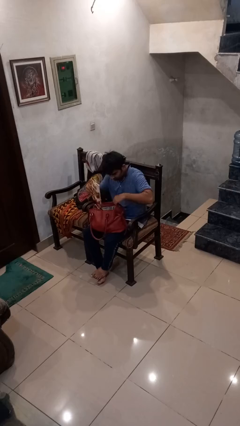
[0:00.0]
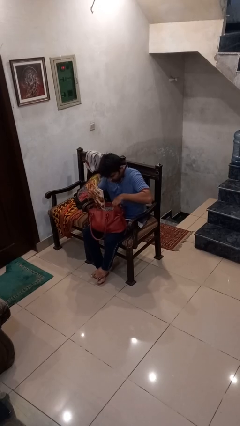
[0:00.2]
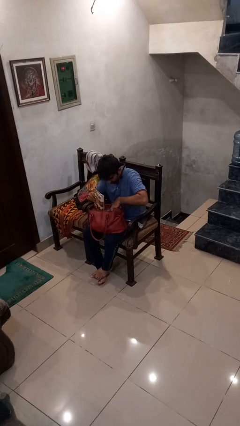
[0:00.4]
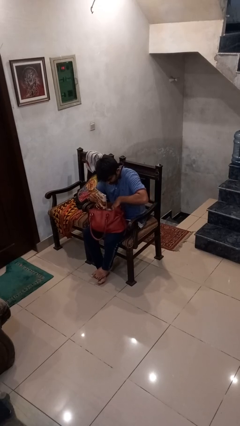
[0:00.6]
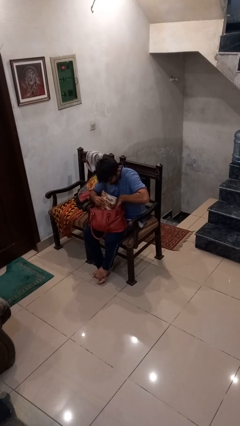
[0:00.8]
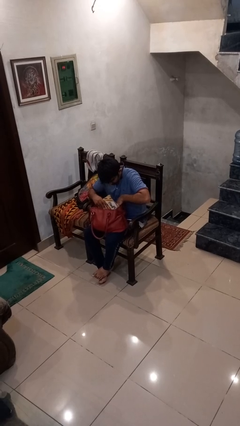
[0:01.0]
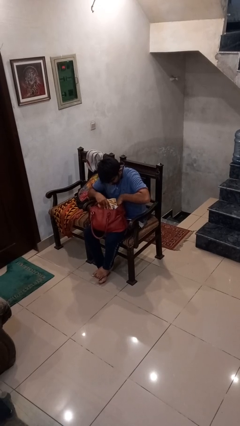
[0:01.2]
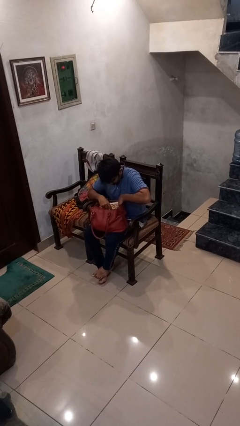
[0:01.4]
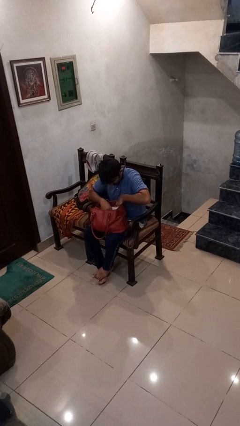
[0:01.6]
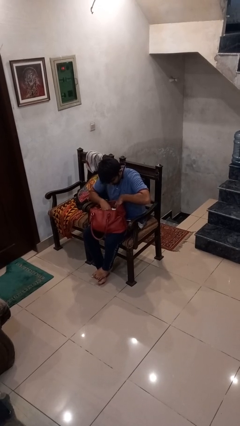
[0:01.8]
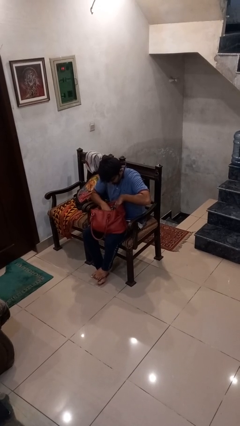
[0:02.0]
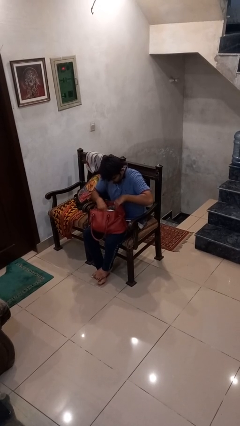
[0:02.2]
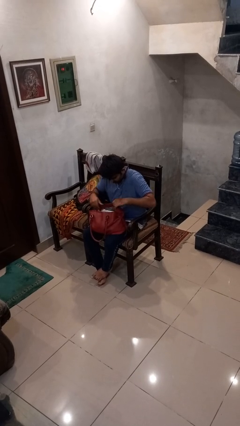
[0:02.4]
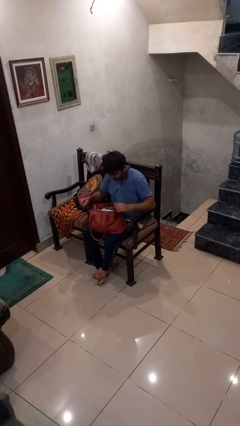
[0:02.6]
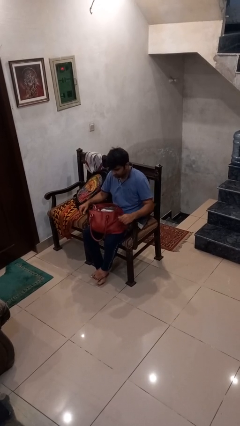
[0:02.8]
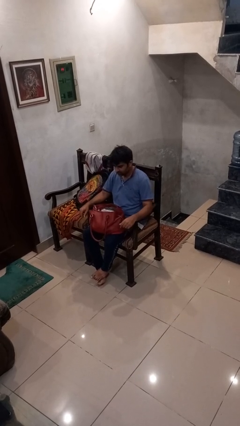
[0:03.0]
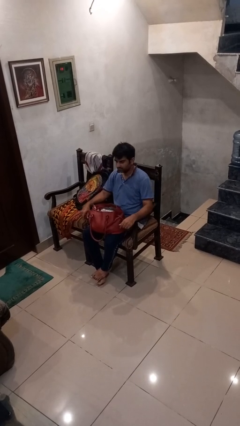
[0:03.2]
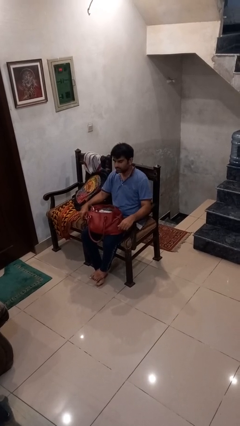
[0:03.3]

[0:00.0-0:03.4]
person puts object into purse

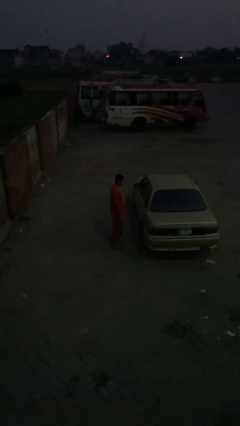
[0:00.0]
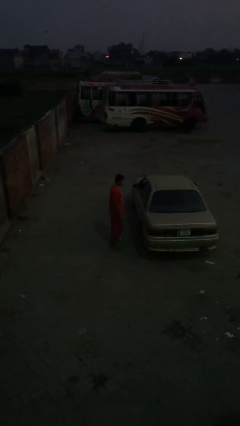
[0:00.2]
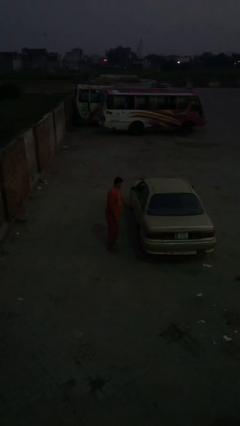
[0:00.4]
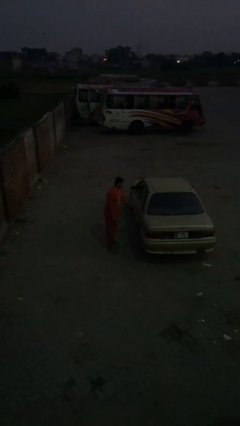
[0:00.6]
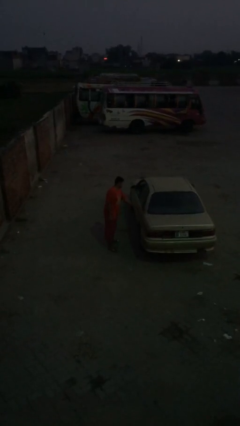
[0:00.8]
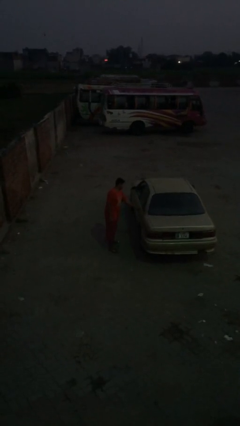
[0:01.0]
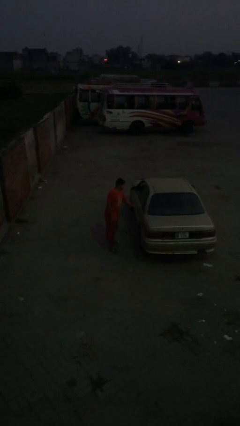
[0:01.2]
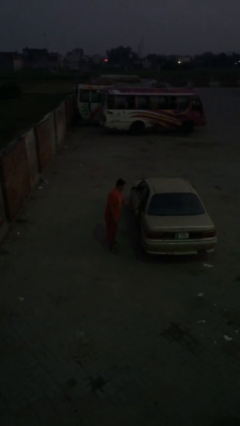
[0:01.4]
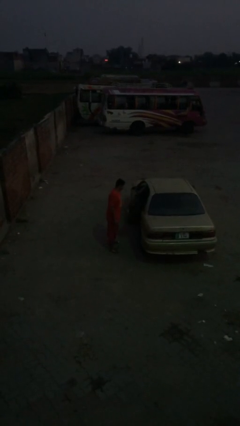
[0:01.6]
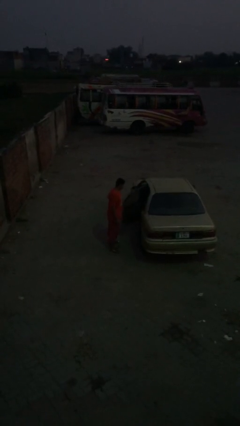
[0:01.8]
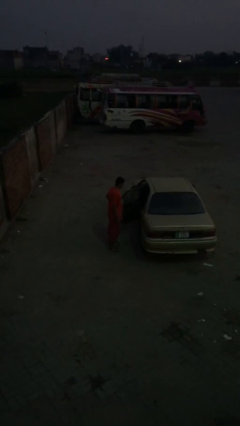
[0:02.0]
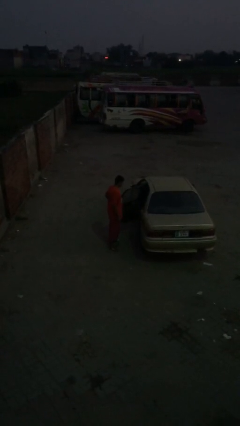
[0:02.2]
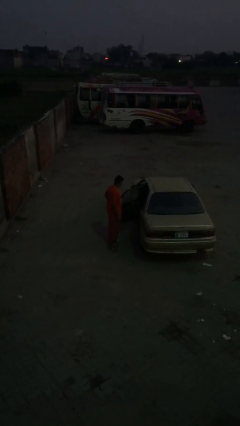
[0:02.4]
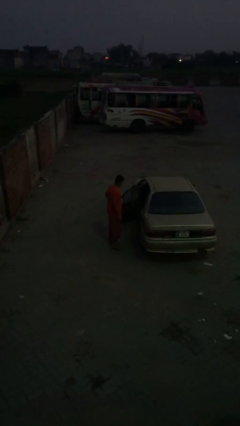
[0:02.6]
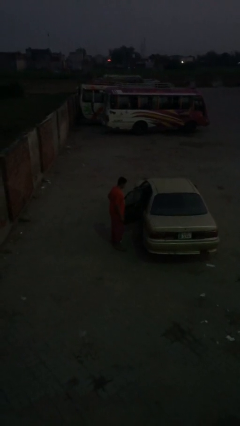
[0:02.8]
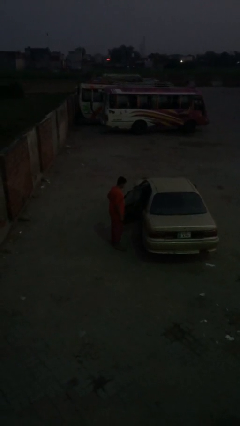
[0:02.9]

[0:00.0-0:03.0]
person opens car door

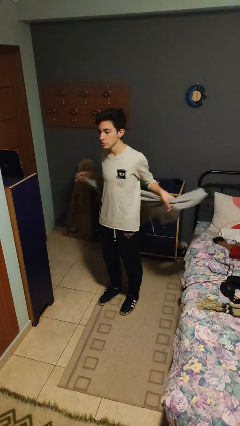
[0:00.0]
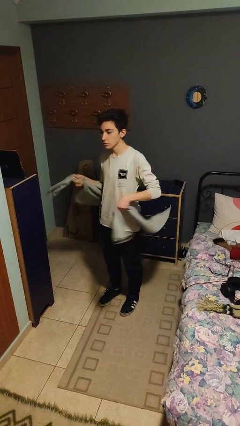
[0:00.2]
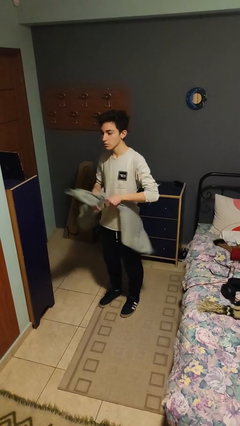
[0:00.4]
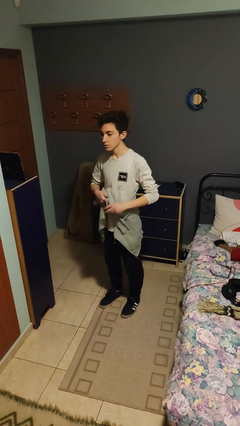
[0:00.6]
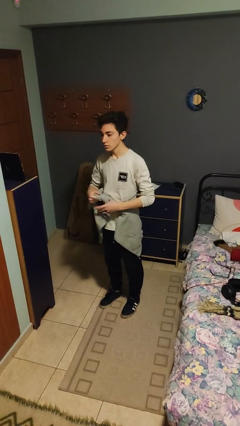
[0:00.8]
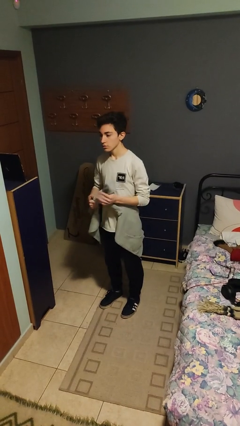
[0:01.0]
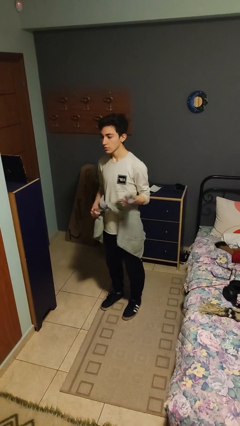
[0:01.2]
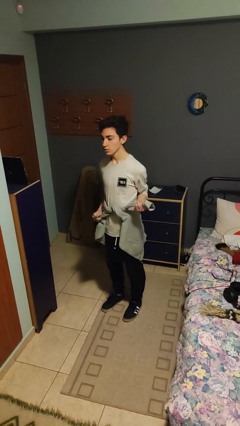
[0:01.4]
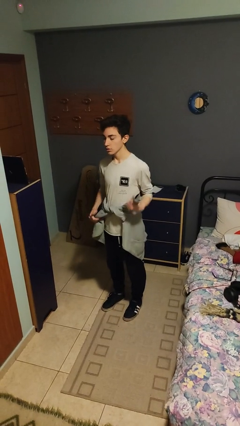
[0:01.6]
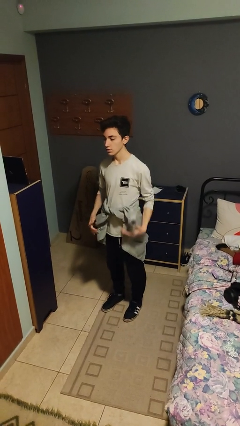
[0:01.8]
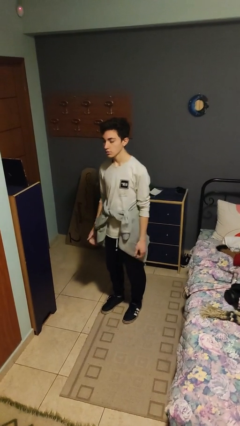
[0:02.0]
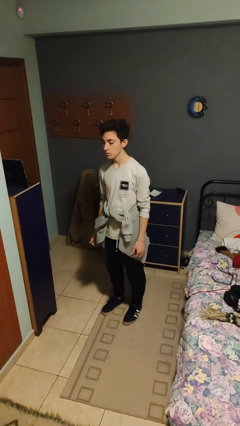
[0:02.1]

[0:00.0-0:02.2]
person ties jacket around waist

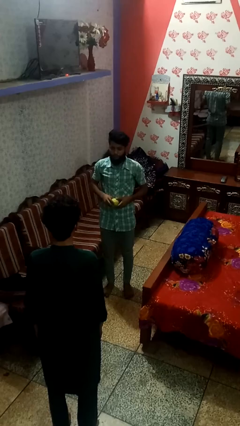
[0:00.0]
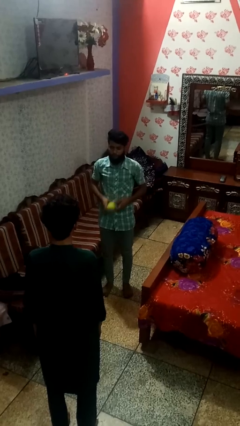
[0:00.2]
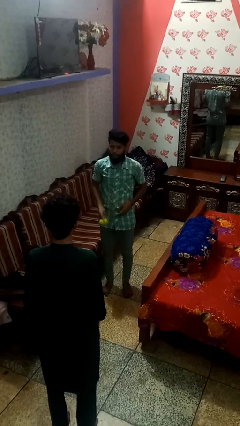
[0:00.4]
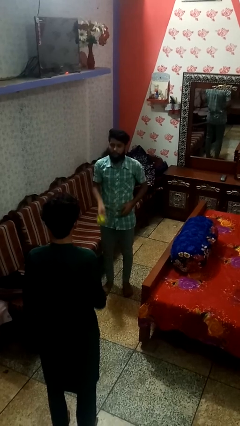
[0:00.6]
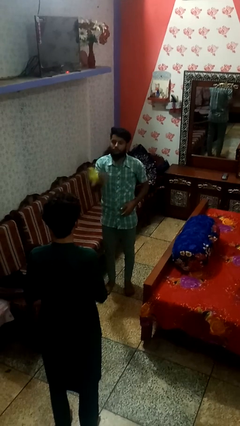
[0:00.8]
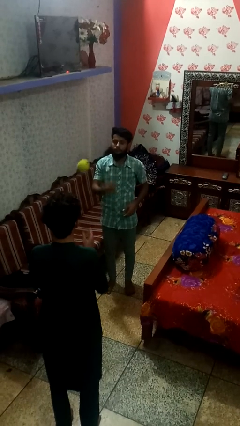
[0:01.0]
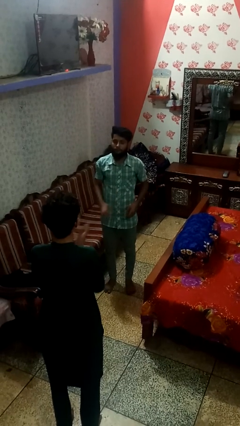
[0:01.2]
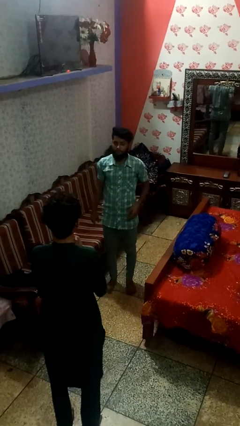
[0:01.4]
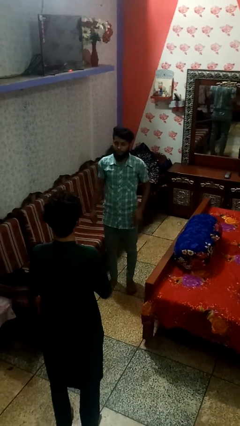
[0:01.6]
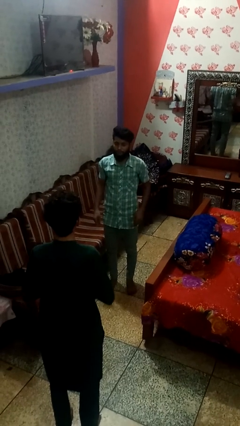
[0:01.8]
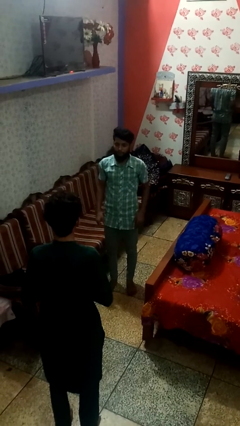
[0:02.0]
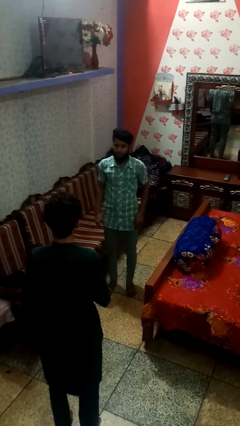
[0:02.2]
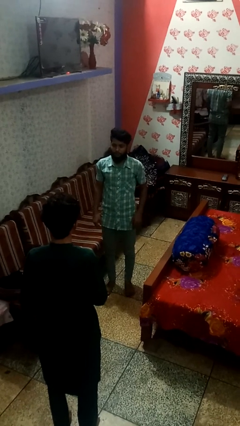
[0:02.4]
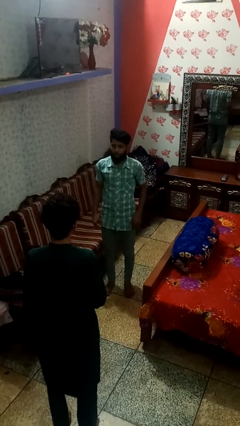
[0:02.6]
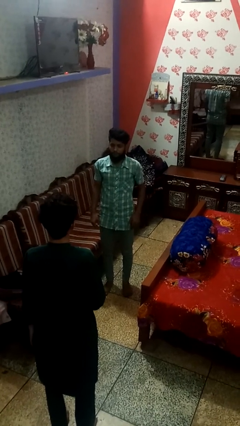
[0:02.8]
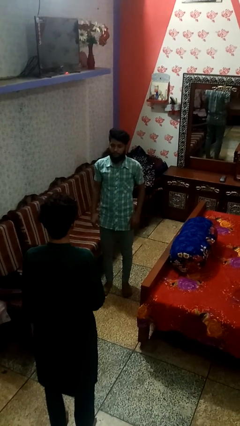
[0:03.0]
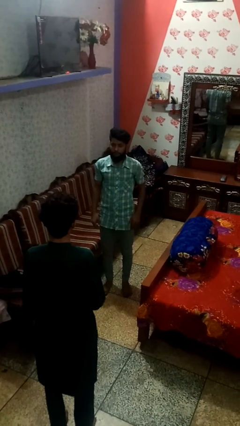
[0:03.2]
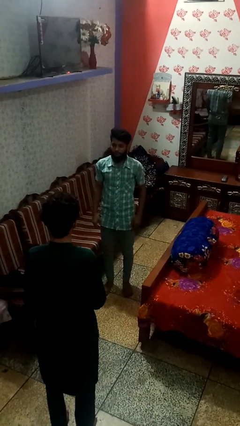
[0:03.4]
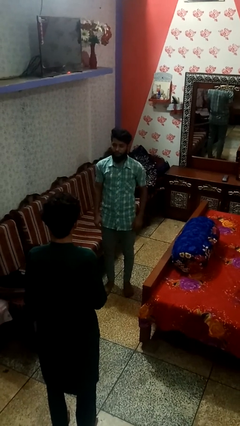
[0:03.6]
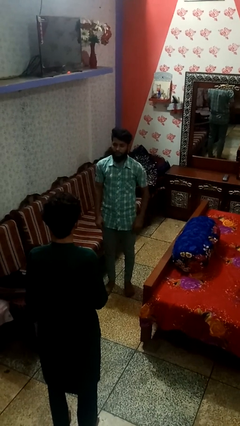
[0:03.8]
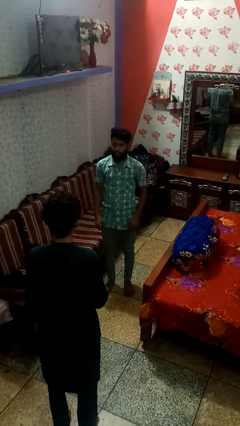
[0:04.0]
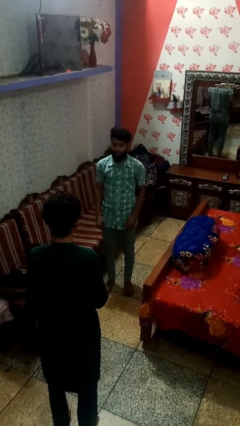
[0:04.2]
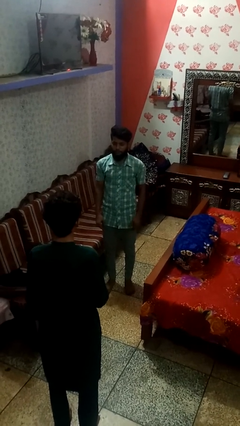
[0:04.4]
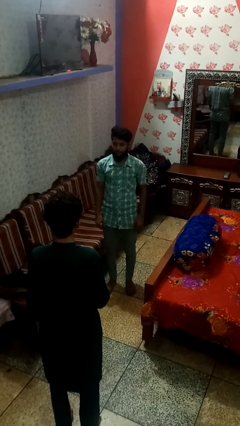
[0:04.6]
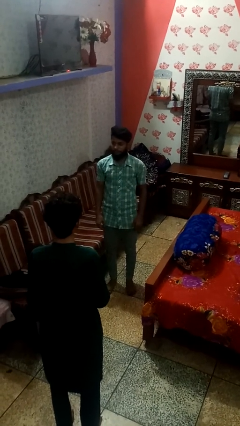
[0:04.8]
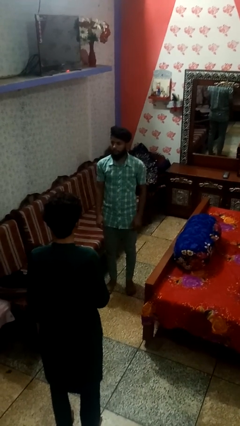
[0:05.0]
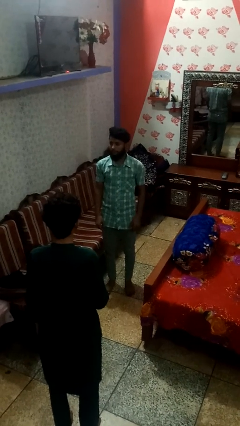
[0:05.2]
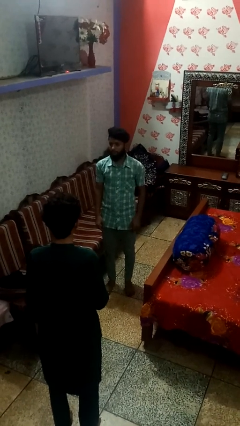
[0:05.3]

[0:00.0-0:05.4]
person throws object to person

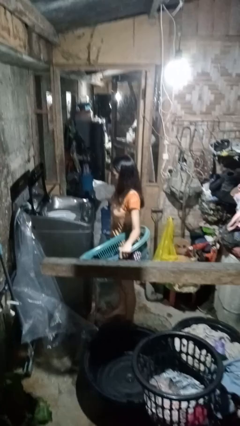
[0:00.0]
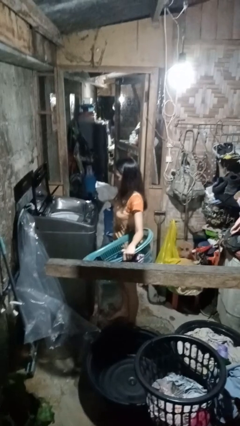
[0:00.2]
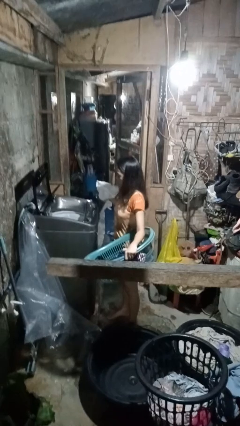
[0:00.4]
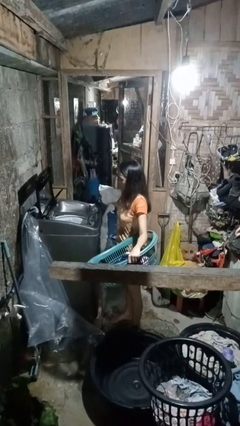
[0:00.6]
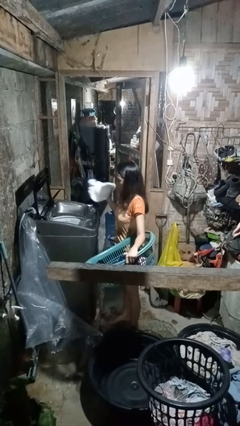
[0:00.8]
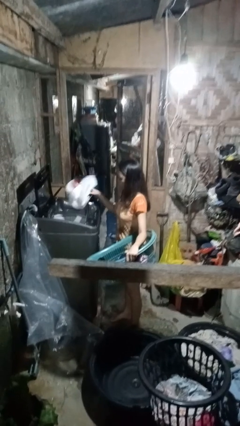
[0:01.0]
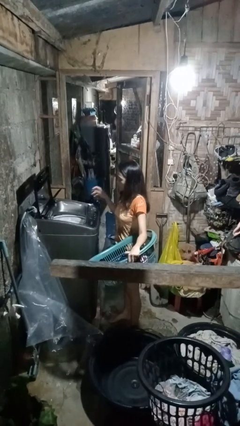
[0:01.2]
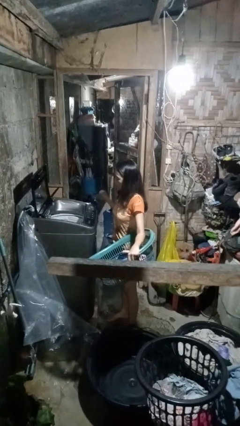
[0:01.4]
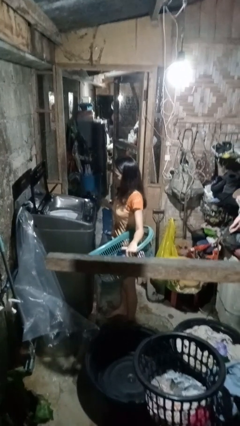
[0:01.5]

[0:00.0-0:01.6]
person loads clotheswasher

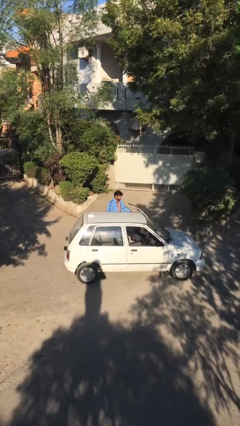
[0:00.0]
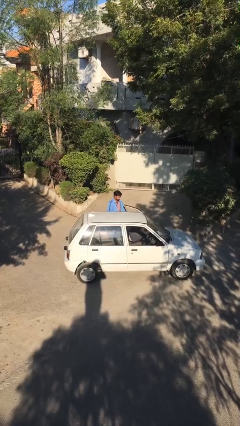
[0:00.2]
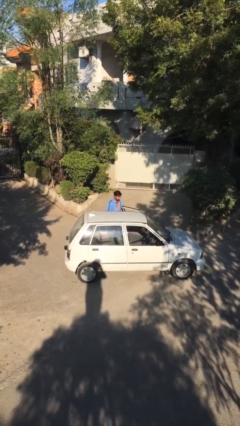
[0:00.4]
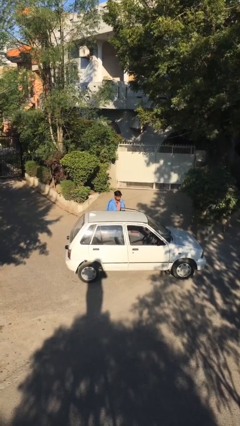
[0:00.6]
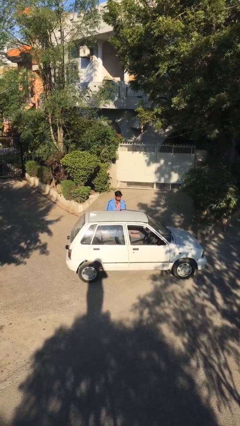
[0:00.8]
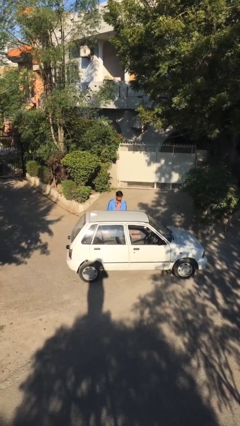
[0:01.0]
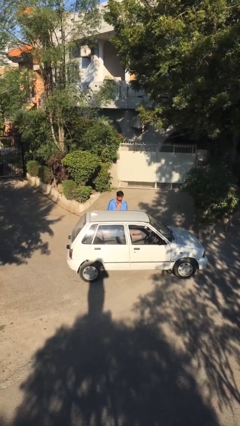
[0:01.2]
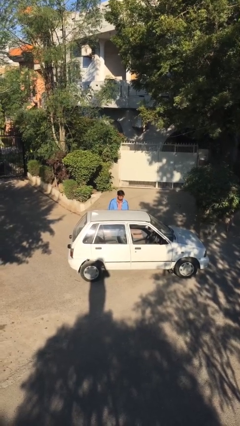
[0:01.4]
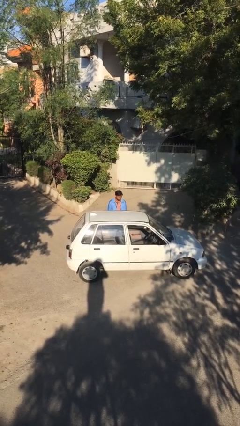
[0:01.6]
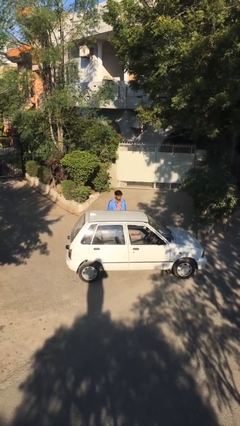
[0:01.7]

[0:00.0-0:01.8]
person closes car door
